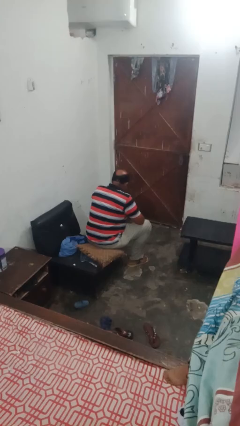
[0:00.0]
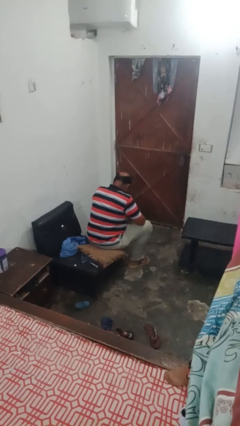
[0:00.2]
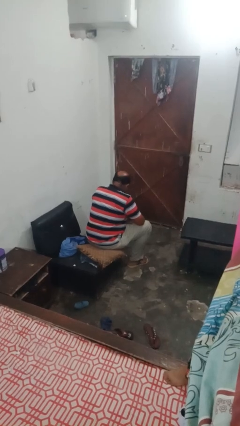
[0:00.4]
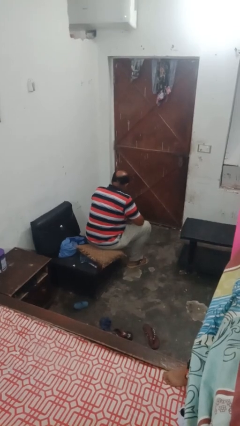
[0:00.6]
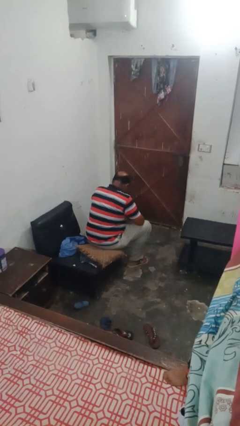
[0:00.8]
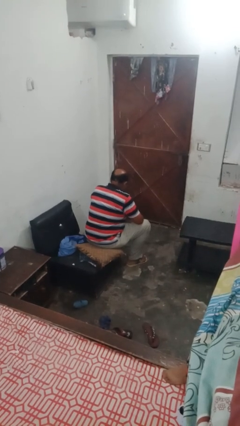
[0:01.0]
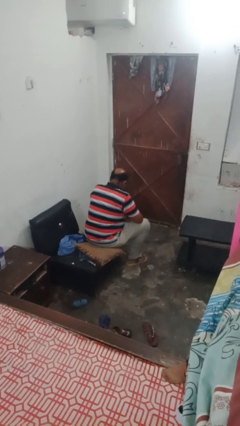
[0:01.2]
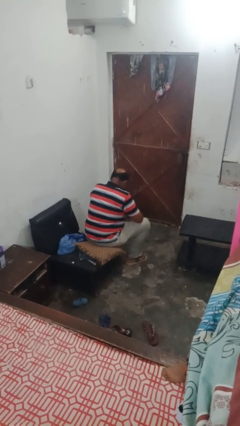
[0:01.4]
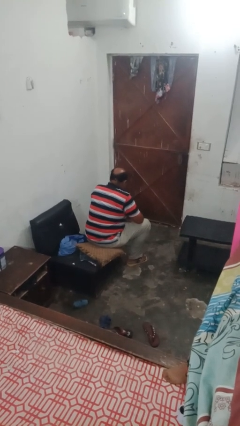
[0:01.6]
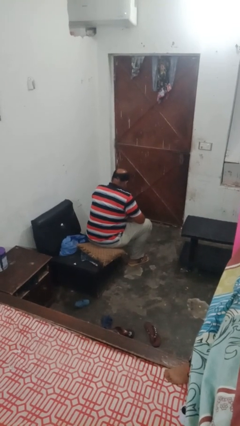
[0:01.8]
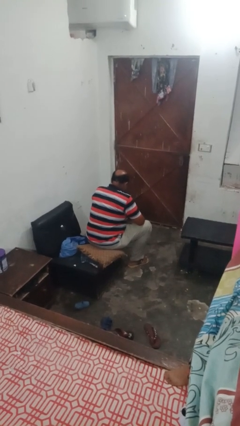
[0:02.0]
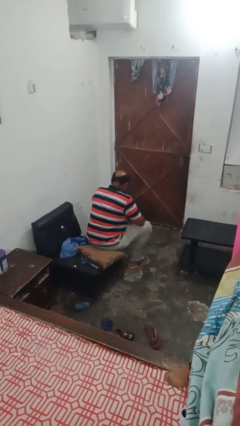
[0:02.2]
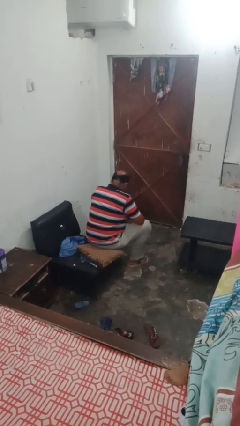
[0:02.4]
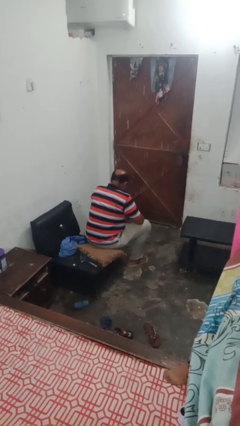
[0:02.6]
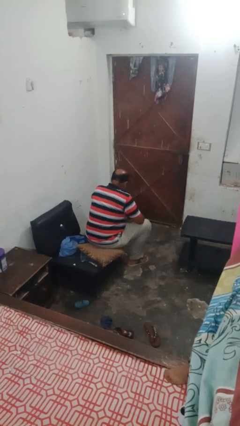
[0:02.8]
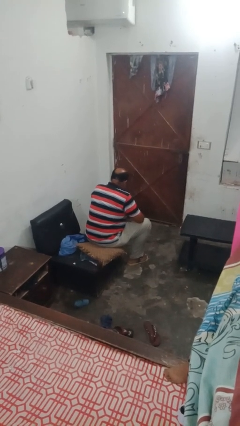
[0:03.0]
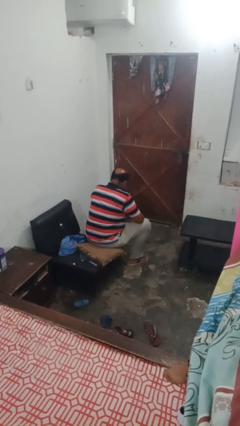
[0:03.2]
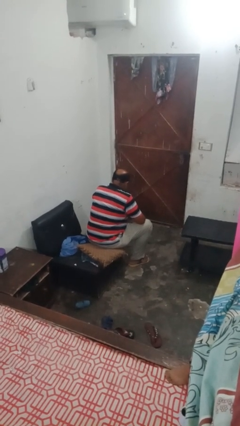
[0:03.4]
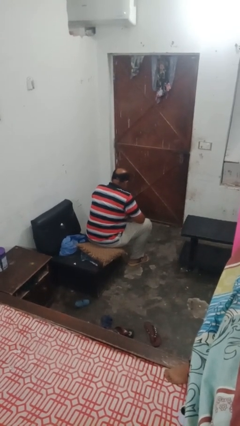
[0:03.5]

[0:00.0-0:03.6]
person nods head

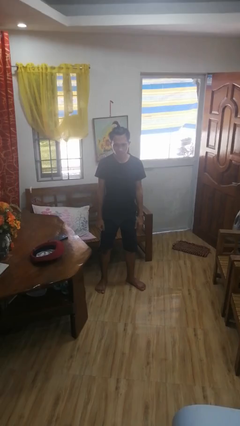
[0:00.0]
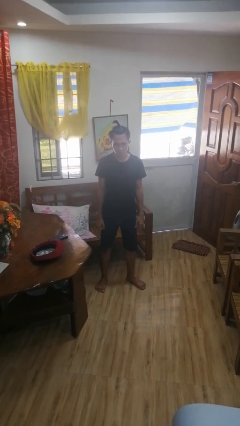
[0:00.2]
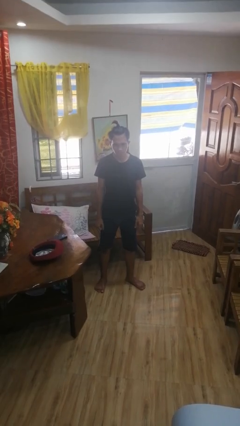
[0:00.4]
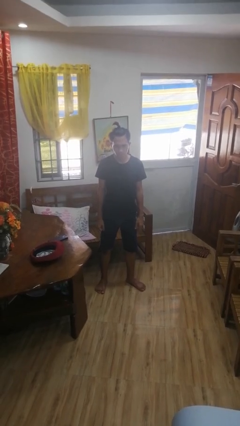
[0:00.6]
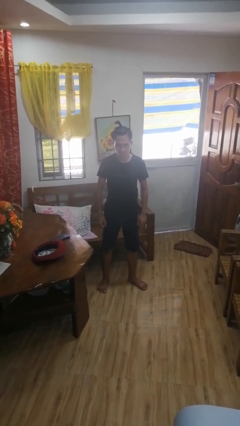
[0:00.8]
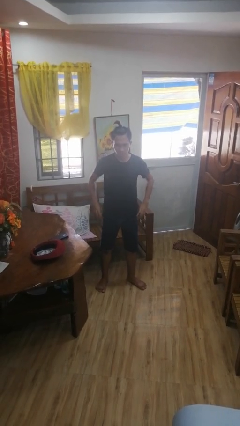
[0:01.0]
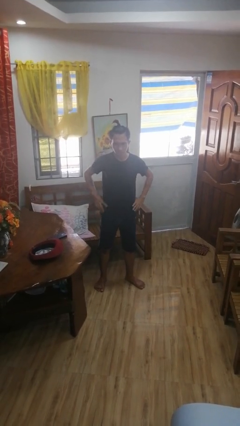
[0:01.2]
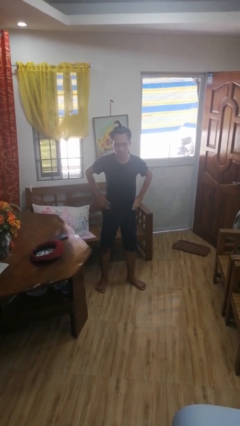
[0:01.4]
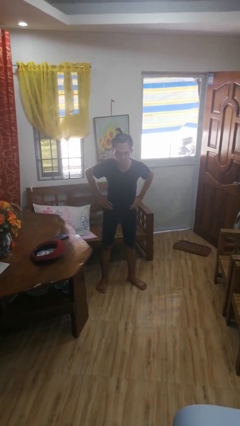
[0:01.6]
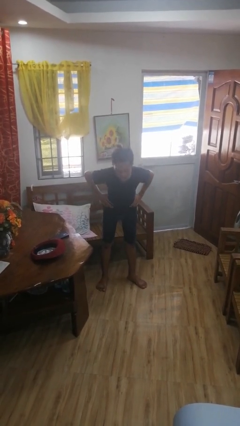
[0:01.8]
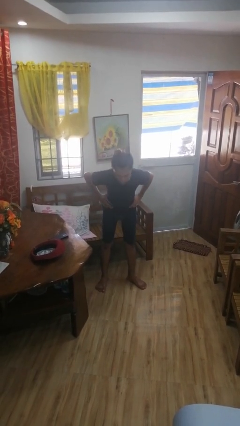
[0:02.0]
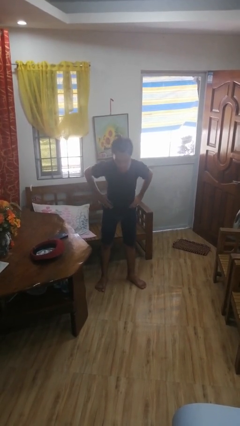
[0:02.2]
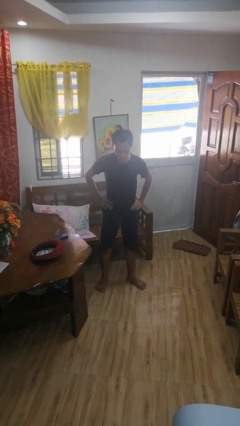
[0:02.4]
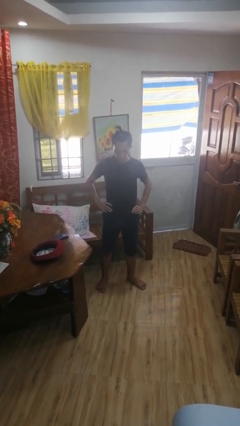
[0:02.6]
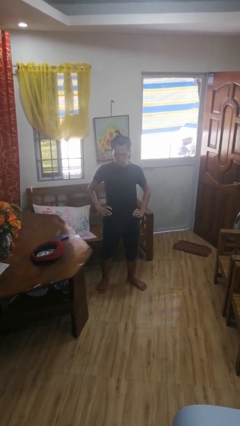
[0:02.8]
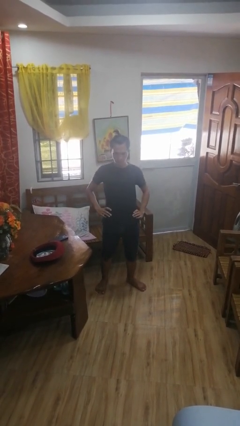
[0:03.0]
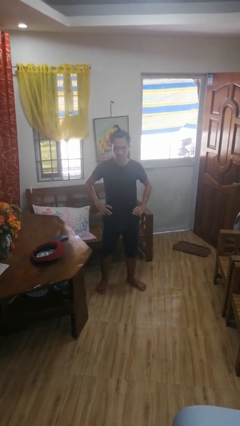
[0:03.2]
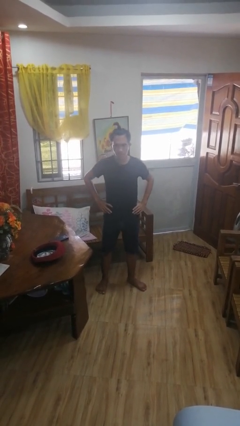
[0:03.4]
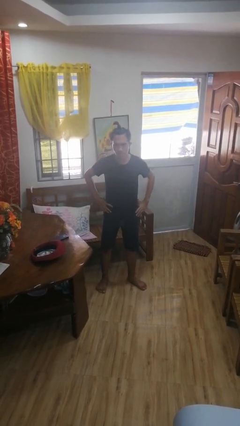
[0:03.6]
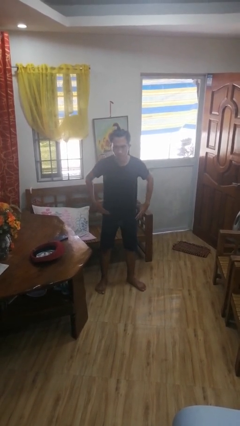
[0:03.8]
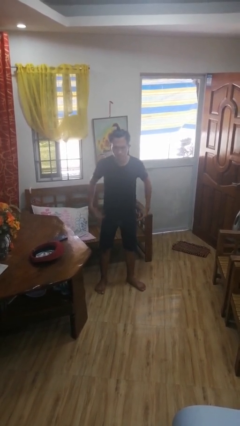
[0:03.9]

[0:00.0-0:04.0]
person wiggles hips

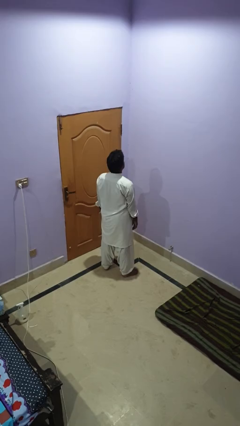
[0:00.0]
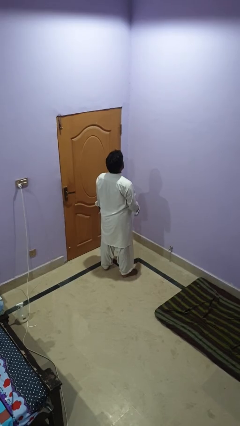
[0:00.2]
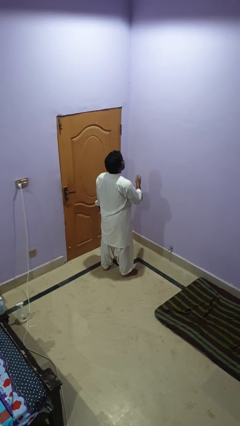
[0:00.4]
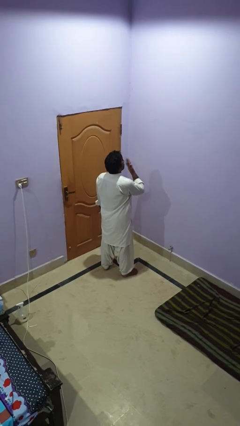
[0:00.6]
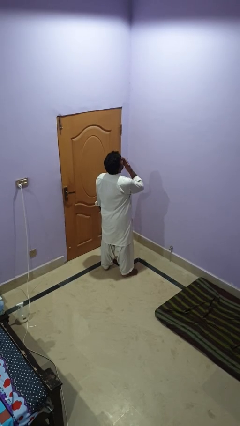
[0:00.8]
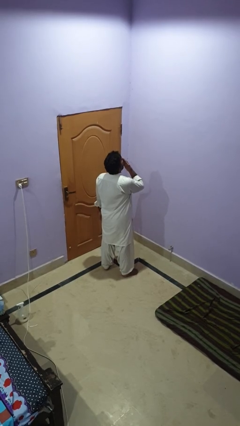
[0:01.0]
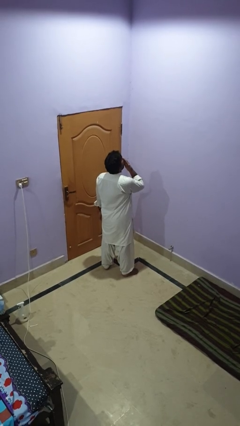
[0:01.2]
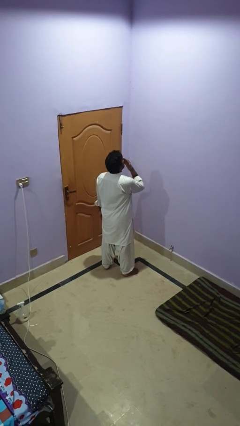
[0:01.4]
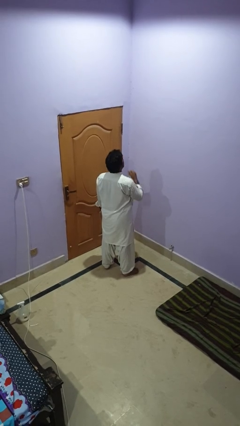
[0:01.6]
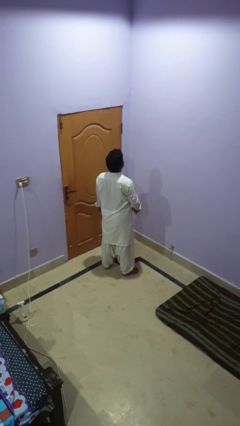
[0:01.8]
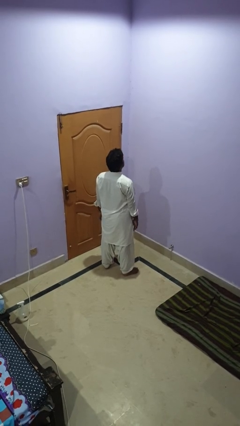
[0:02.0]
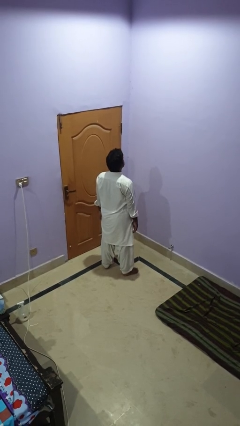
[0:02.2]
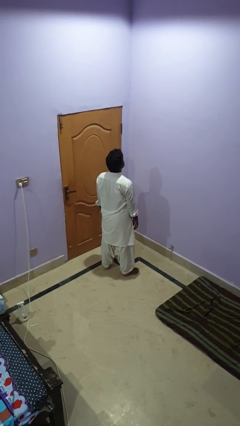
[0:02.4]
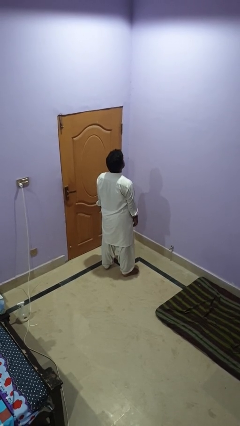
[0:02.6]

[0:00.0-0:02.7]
person yawns

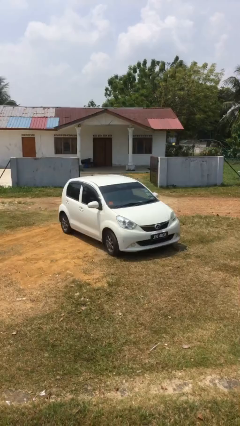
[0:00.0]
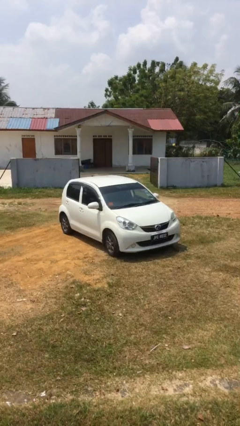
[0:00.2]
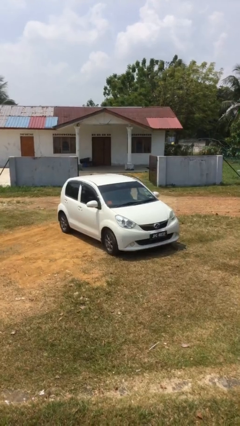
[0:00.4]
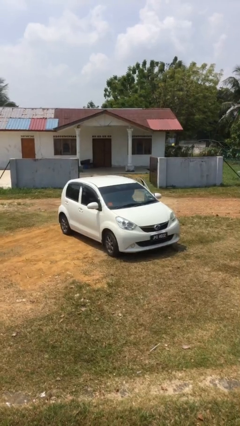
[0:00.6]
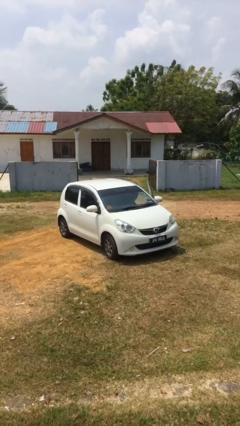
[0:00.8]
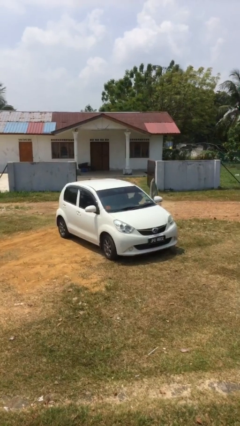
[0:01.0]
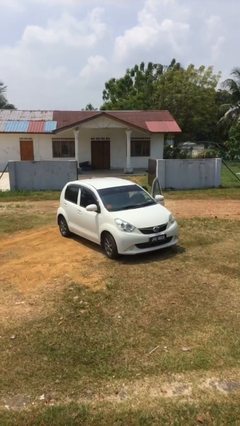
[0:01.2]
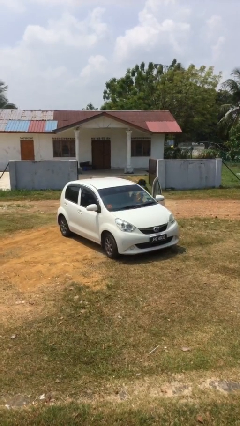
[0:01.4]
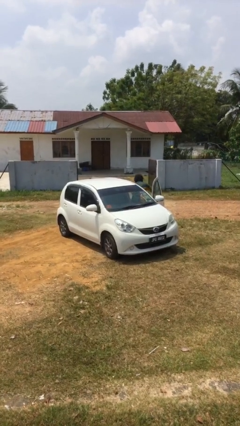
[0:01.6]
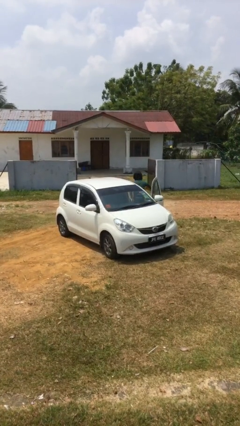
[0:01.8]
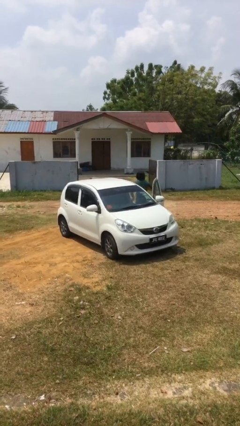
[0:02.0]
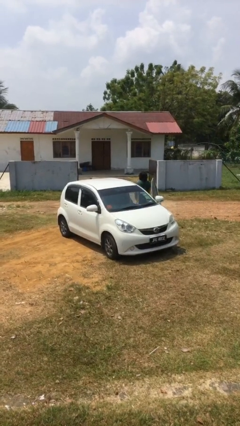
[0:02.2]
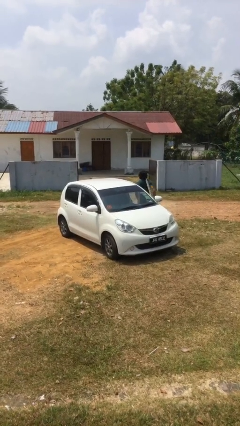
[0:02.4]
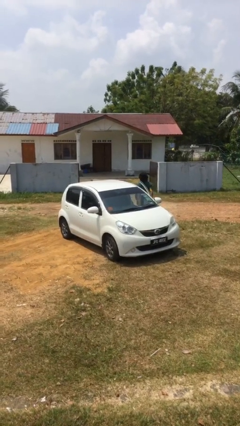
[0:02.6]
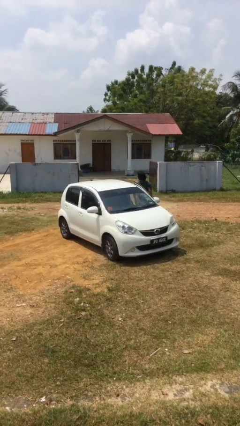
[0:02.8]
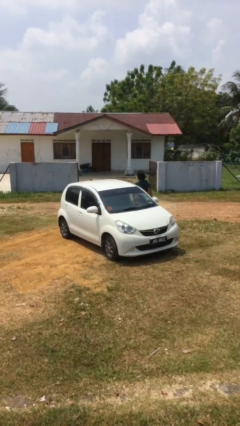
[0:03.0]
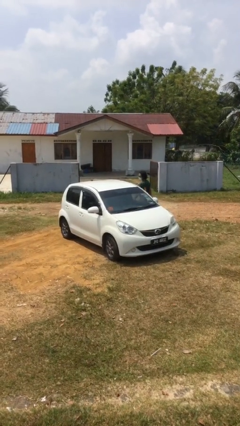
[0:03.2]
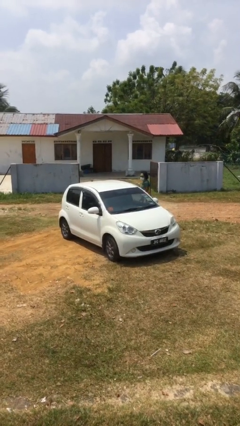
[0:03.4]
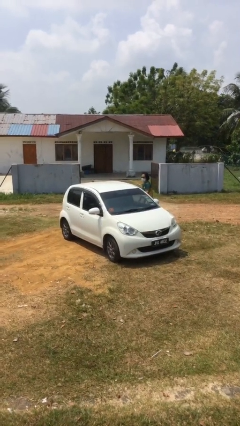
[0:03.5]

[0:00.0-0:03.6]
car drops off person

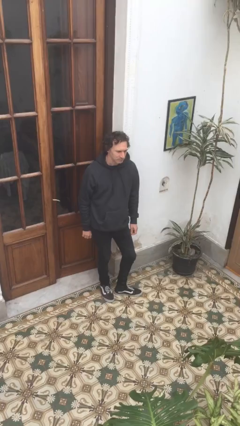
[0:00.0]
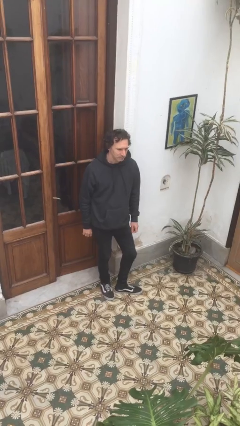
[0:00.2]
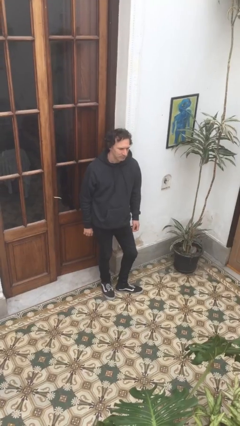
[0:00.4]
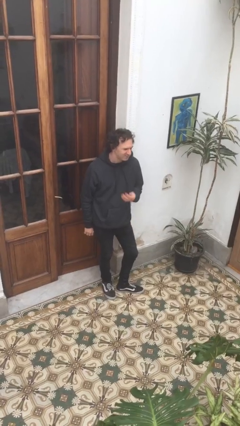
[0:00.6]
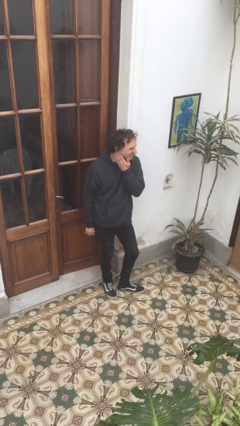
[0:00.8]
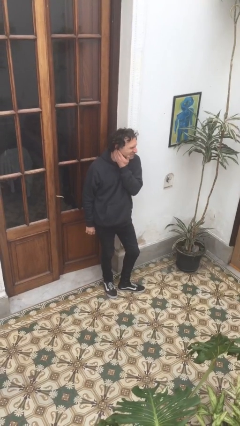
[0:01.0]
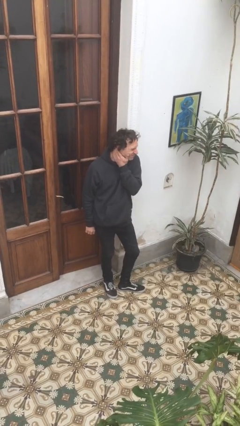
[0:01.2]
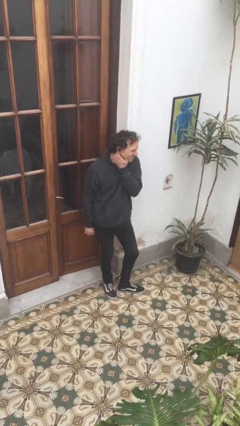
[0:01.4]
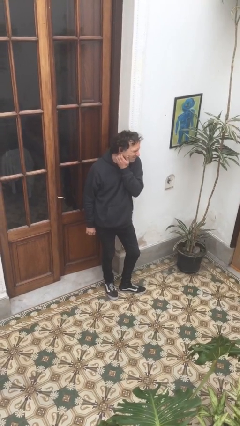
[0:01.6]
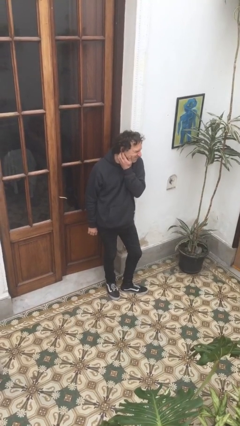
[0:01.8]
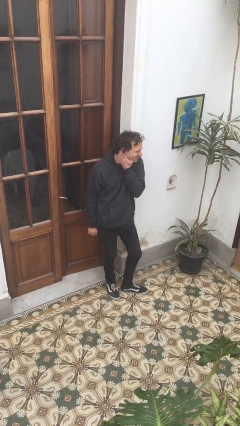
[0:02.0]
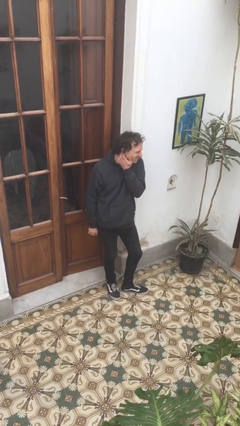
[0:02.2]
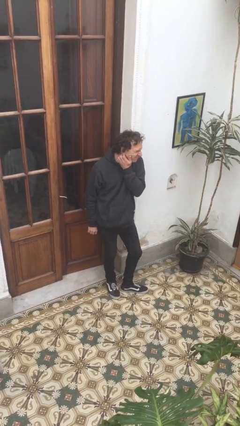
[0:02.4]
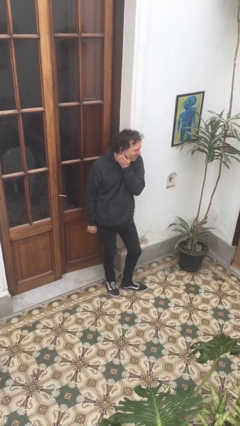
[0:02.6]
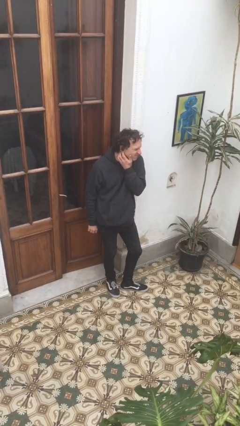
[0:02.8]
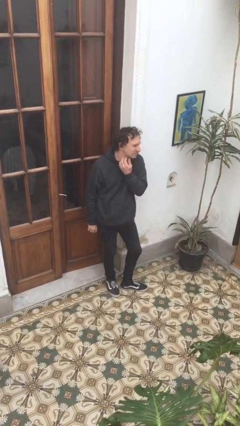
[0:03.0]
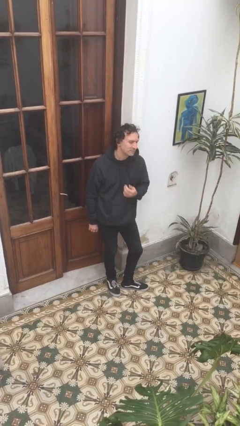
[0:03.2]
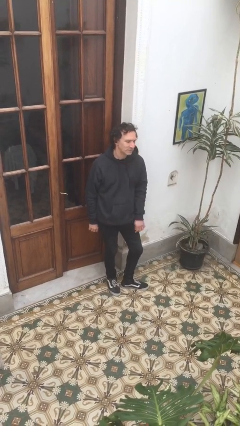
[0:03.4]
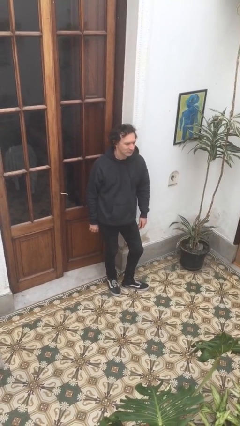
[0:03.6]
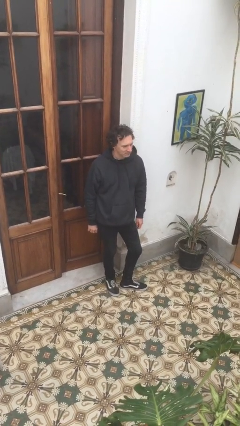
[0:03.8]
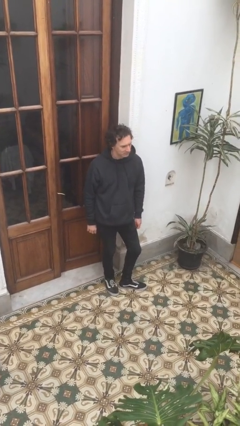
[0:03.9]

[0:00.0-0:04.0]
person rubs neck

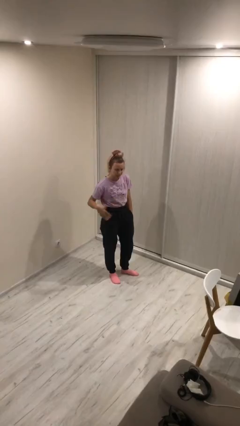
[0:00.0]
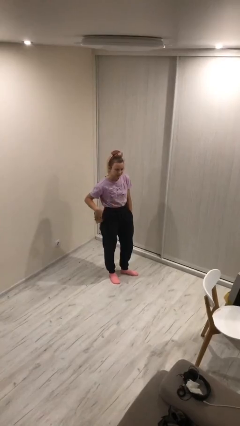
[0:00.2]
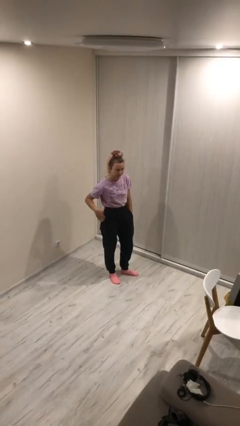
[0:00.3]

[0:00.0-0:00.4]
person puts phone into pocket
